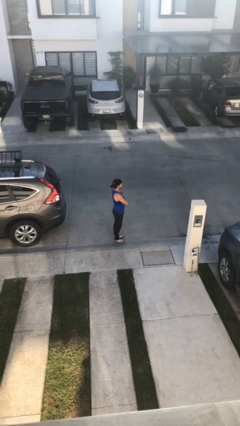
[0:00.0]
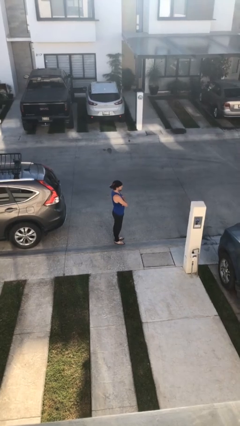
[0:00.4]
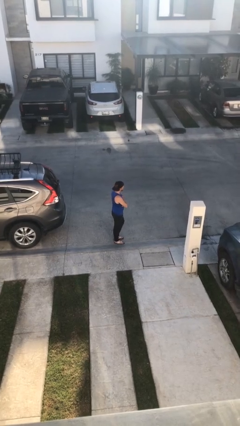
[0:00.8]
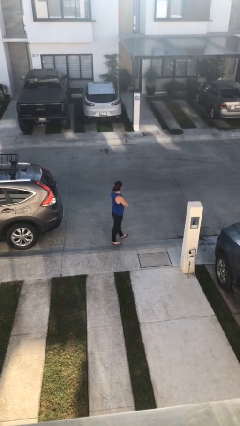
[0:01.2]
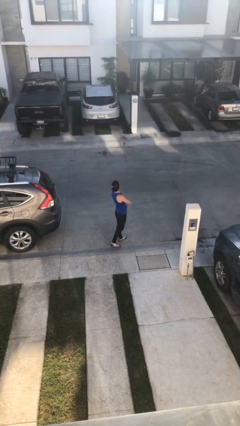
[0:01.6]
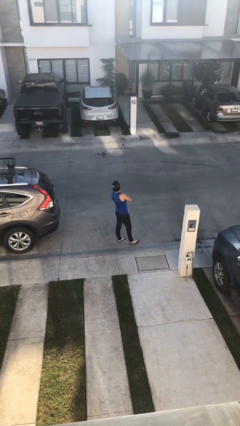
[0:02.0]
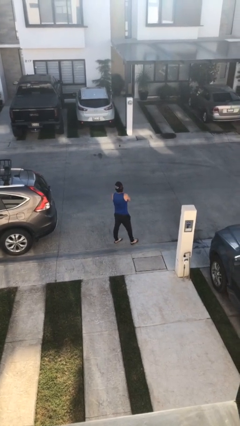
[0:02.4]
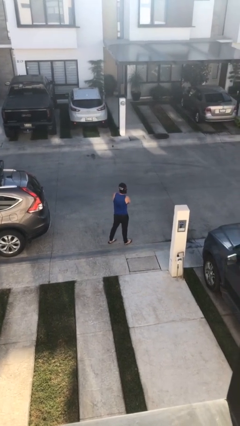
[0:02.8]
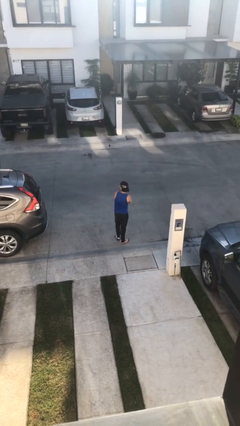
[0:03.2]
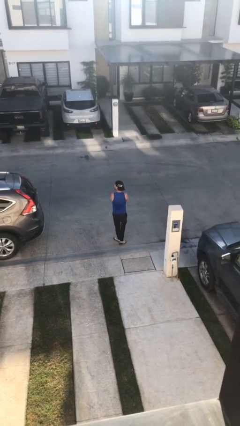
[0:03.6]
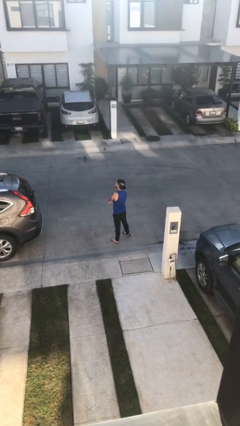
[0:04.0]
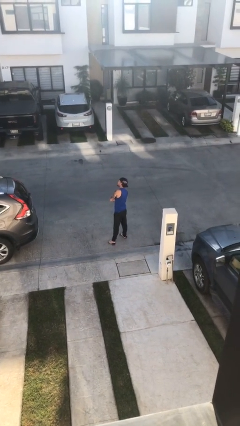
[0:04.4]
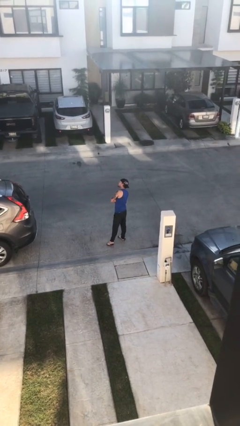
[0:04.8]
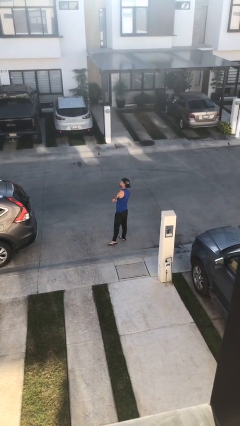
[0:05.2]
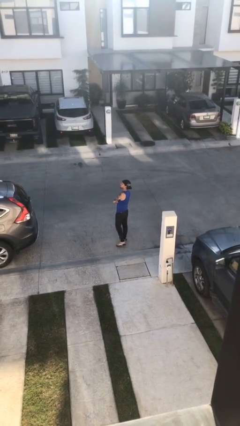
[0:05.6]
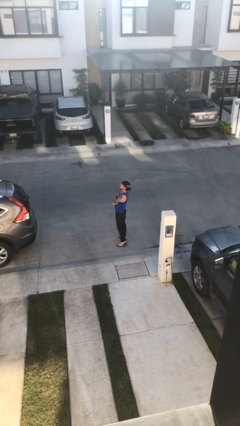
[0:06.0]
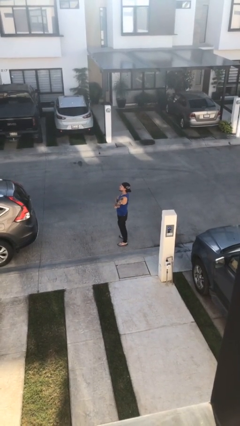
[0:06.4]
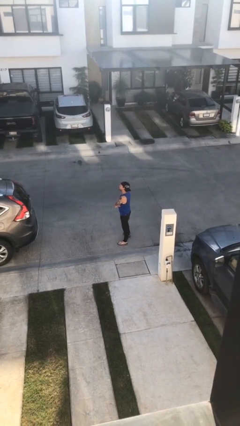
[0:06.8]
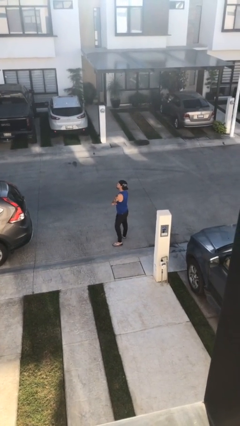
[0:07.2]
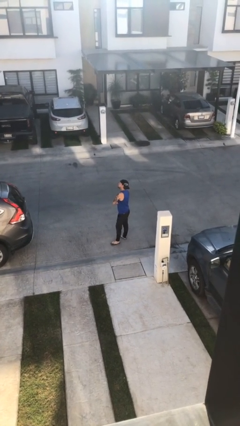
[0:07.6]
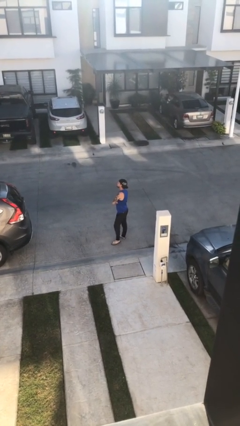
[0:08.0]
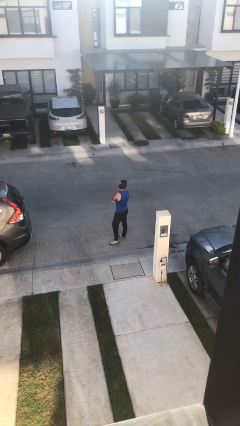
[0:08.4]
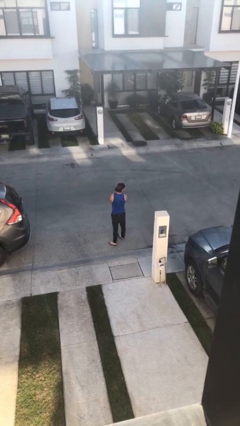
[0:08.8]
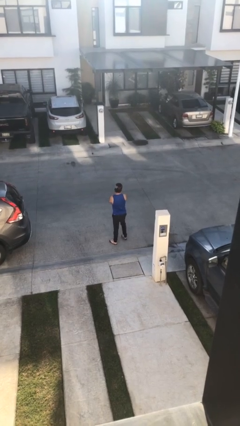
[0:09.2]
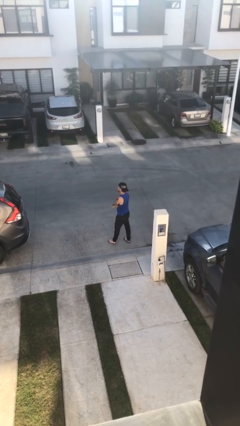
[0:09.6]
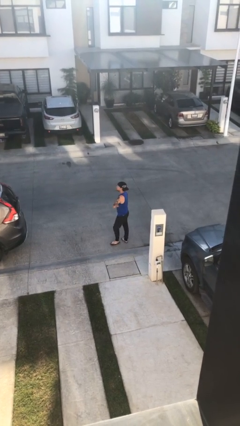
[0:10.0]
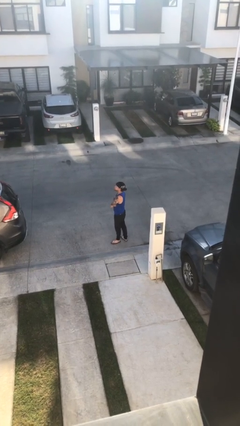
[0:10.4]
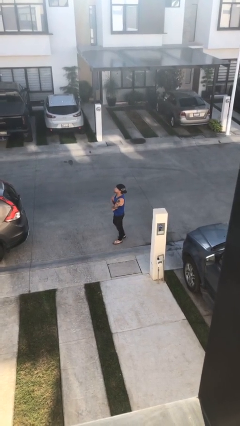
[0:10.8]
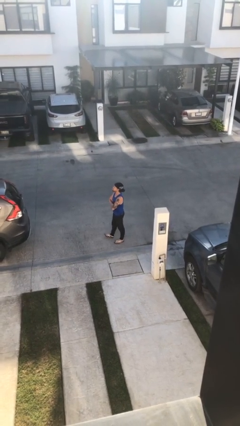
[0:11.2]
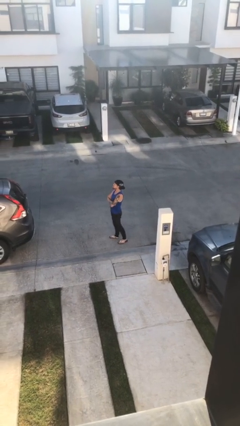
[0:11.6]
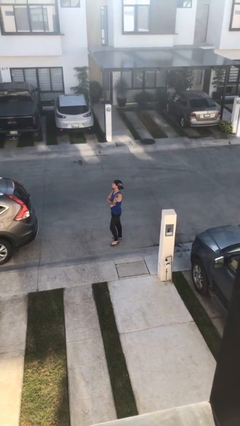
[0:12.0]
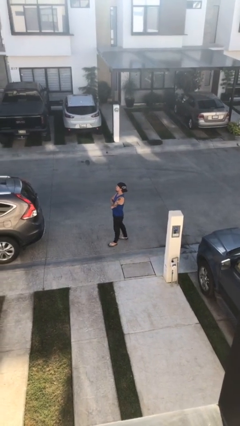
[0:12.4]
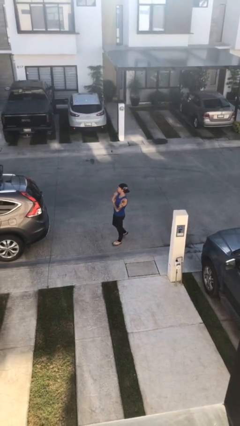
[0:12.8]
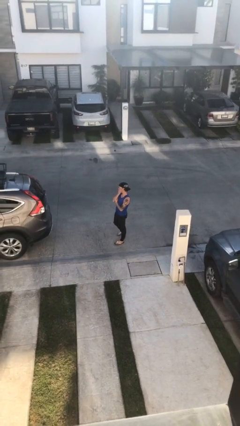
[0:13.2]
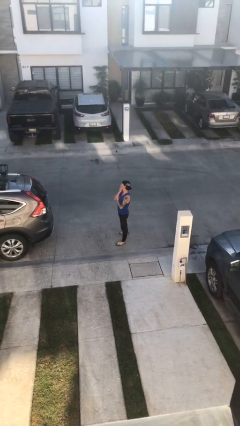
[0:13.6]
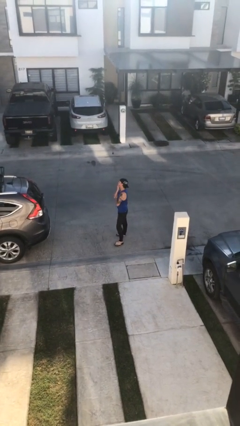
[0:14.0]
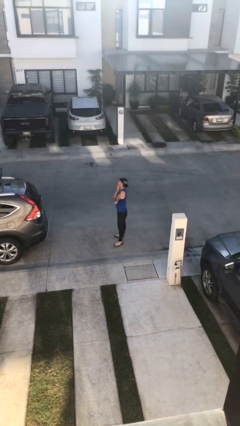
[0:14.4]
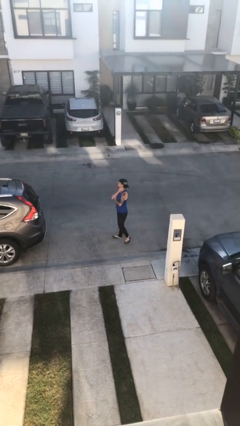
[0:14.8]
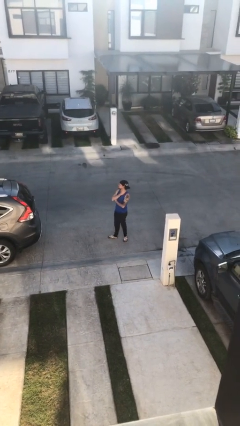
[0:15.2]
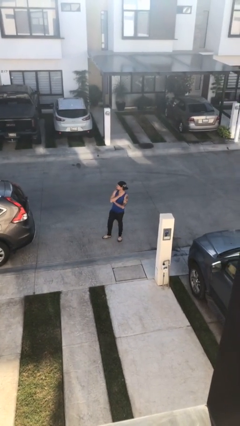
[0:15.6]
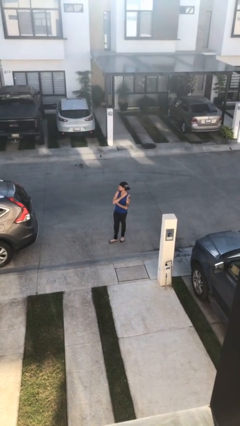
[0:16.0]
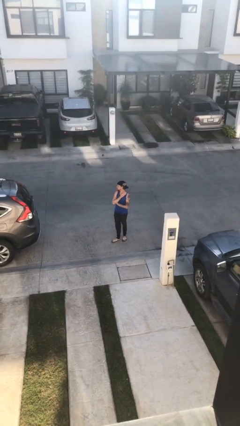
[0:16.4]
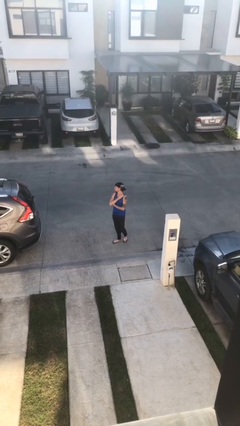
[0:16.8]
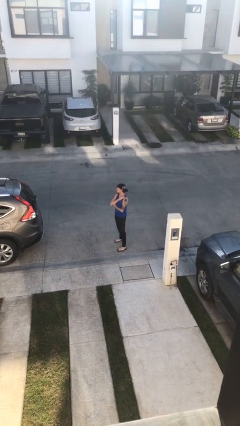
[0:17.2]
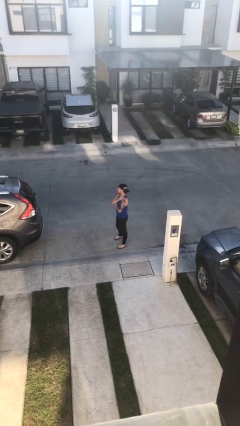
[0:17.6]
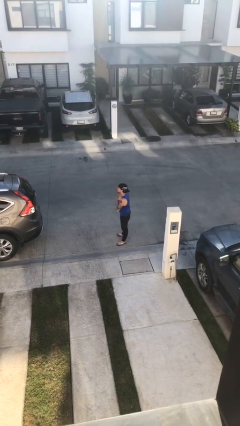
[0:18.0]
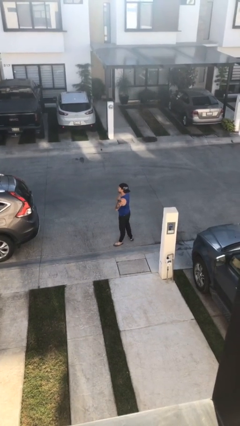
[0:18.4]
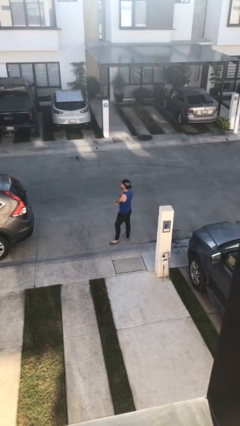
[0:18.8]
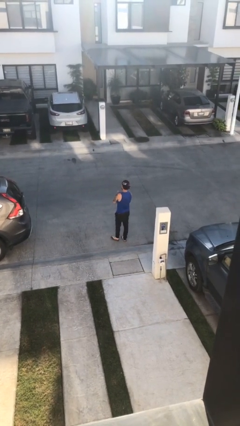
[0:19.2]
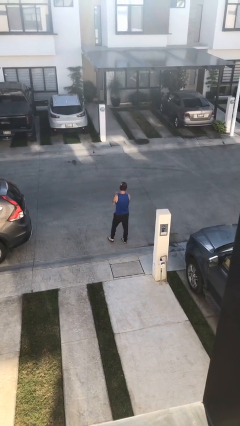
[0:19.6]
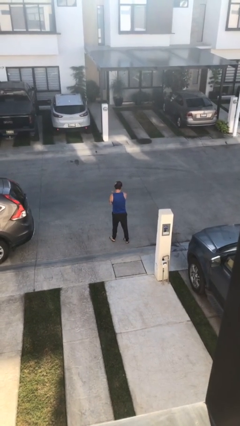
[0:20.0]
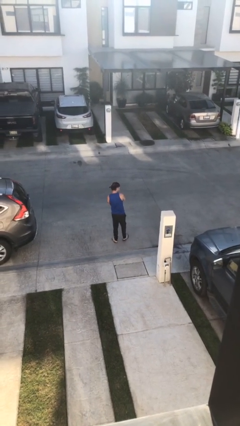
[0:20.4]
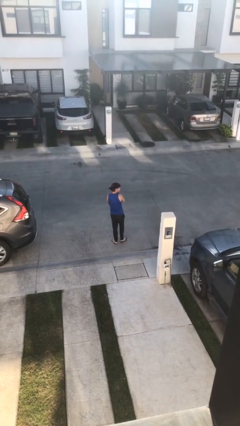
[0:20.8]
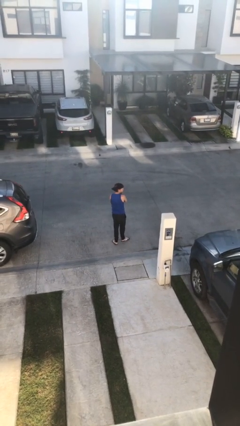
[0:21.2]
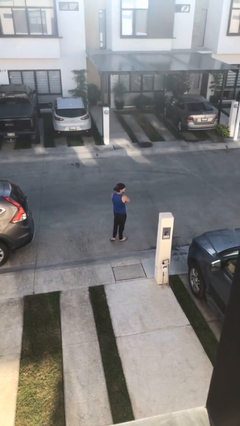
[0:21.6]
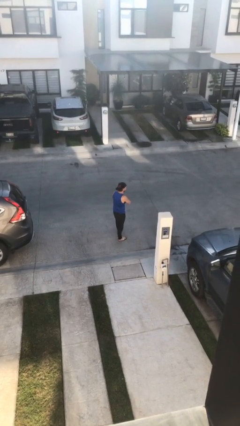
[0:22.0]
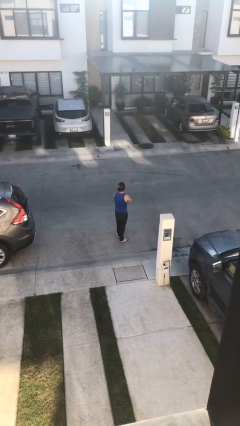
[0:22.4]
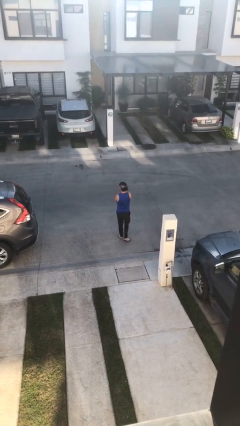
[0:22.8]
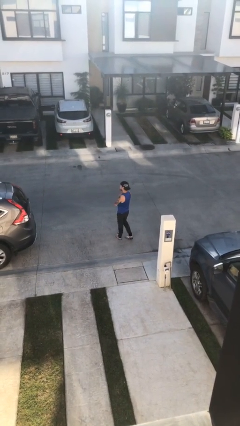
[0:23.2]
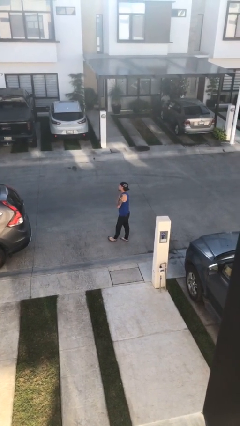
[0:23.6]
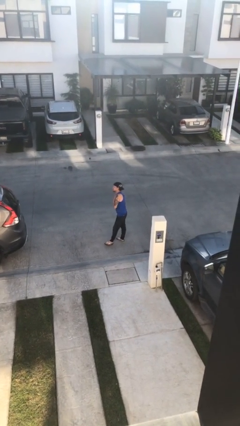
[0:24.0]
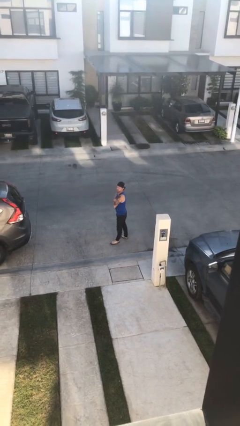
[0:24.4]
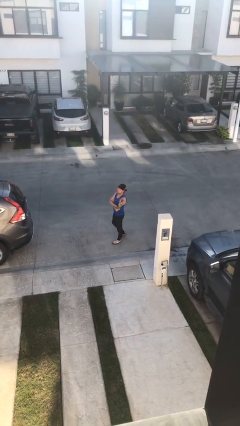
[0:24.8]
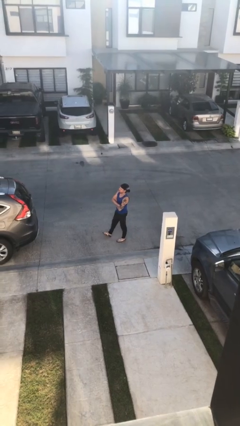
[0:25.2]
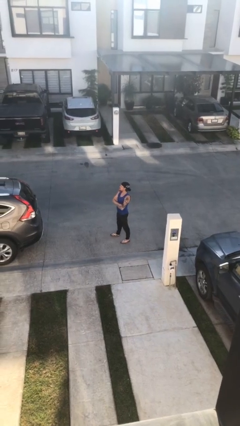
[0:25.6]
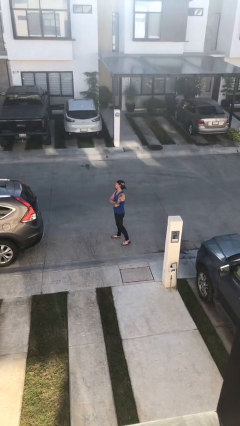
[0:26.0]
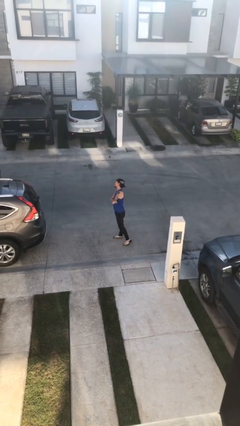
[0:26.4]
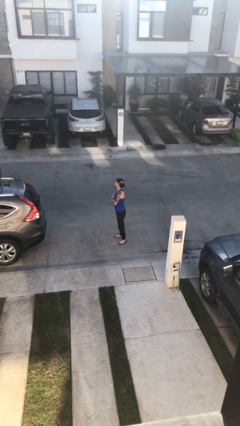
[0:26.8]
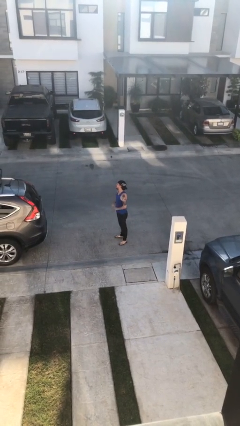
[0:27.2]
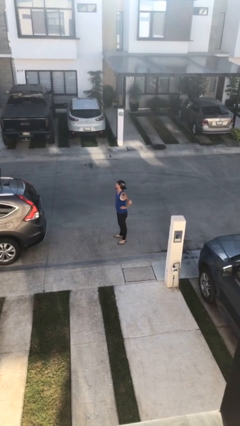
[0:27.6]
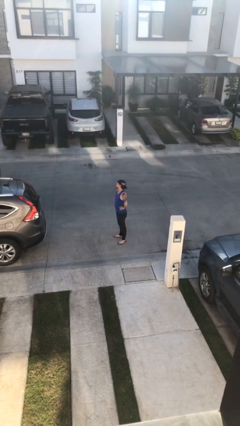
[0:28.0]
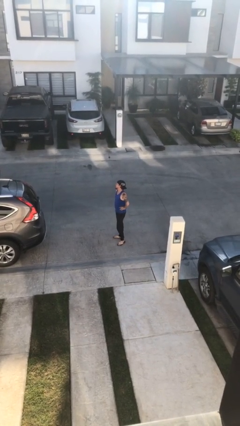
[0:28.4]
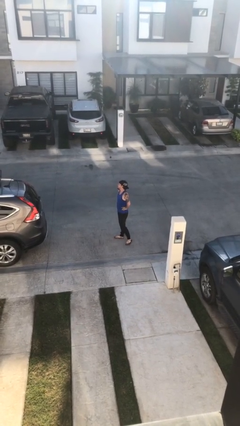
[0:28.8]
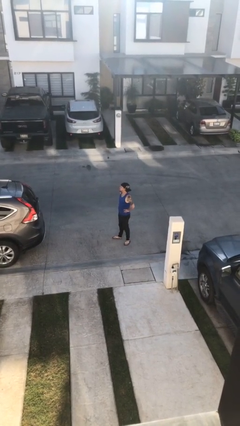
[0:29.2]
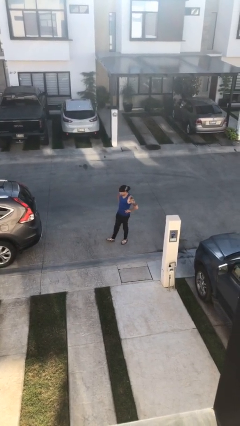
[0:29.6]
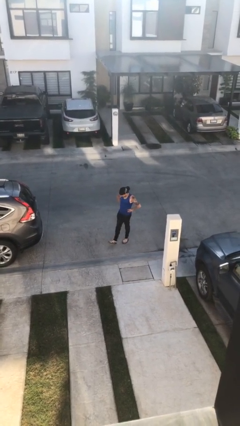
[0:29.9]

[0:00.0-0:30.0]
person walks

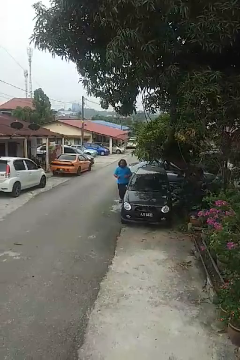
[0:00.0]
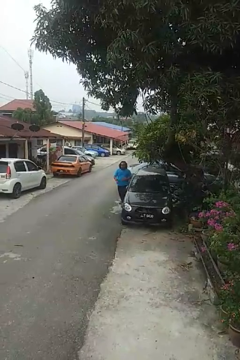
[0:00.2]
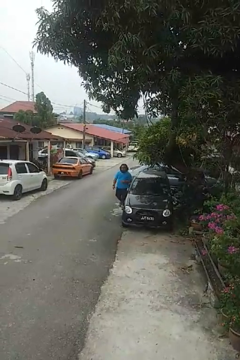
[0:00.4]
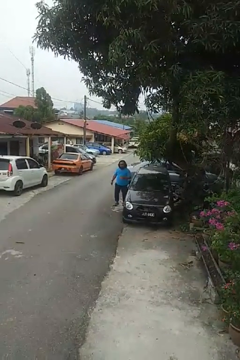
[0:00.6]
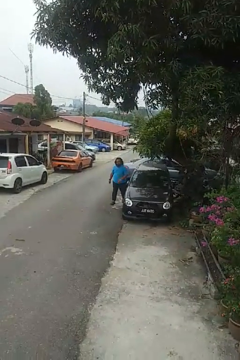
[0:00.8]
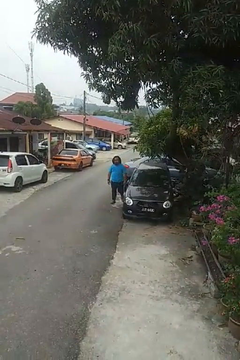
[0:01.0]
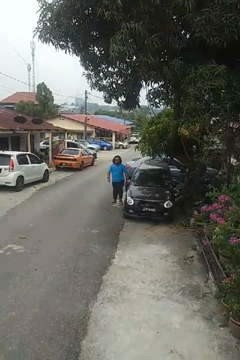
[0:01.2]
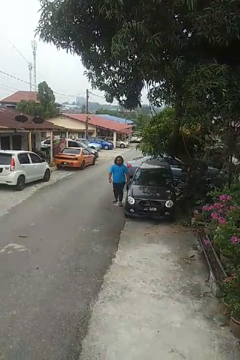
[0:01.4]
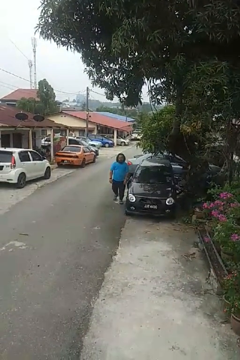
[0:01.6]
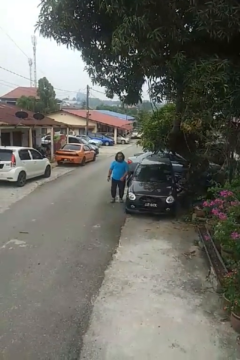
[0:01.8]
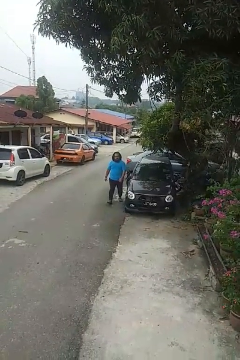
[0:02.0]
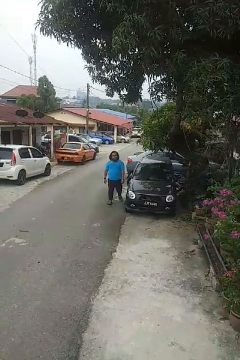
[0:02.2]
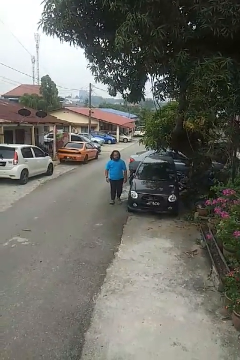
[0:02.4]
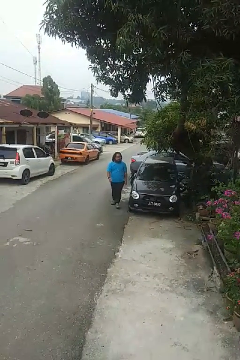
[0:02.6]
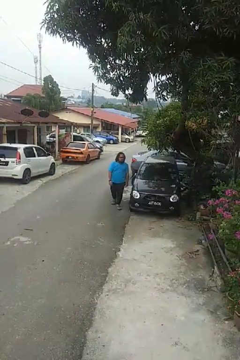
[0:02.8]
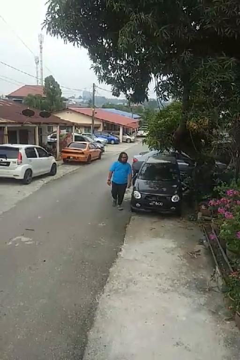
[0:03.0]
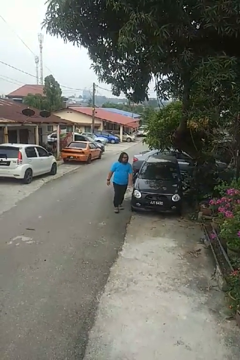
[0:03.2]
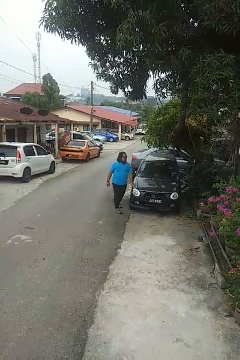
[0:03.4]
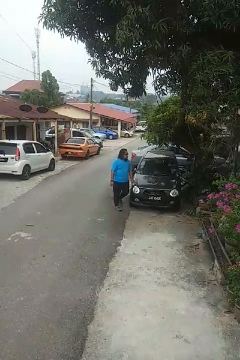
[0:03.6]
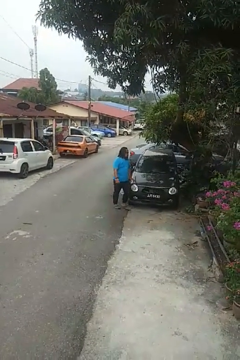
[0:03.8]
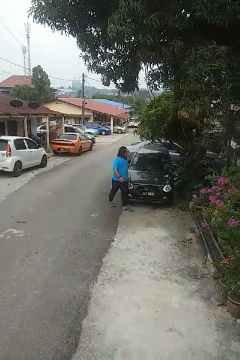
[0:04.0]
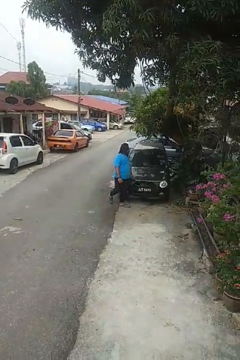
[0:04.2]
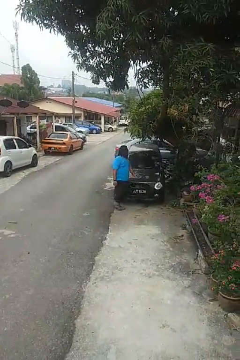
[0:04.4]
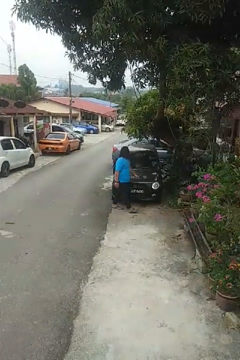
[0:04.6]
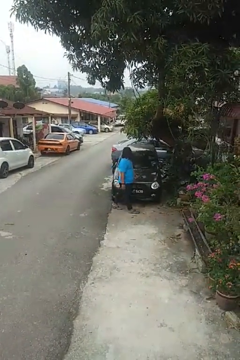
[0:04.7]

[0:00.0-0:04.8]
person walks around car
